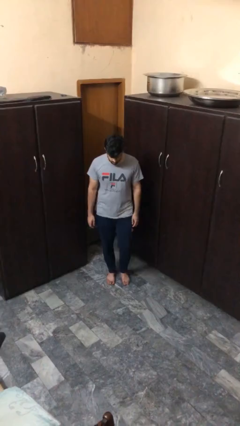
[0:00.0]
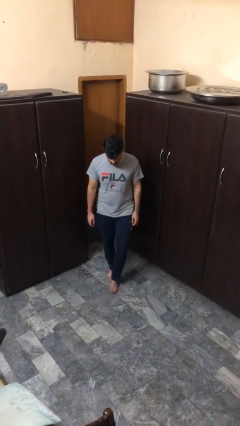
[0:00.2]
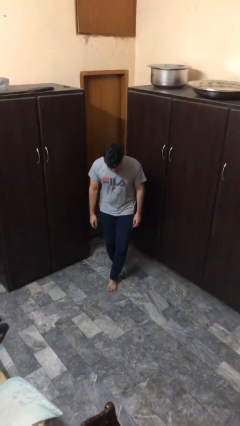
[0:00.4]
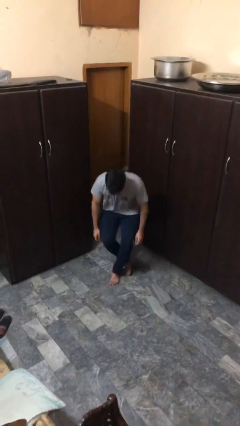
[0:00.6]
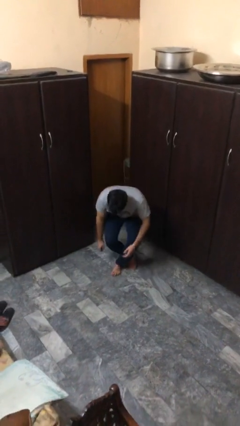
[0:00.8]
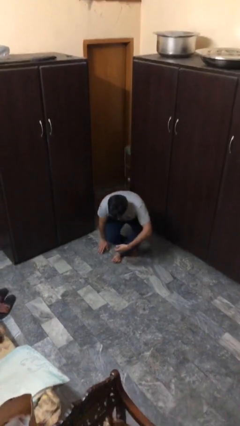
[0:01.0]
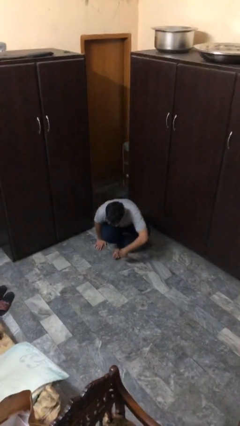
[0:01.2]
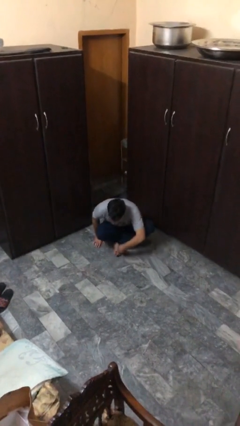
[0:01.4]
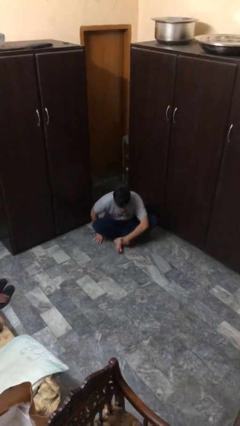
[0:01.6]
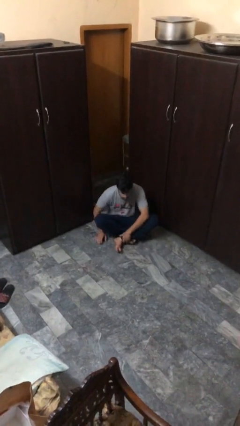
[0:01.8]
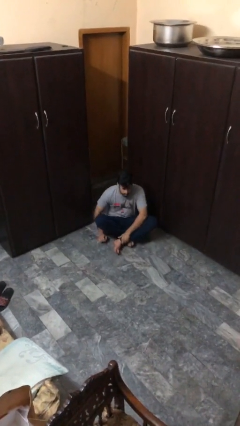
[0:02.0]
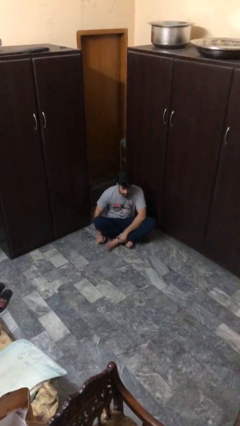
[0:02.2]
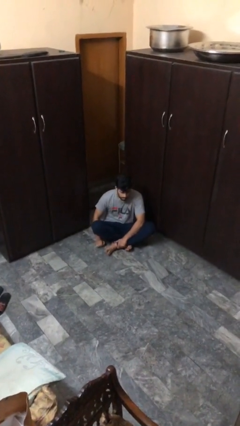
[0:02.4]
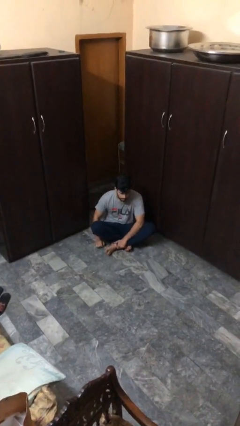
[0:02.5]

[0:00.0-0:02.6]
person sits crisscross

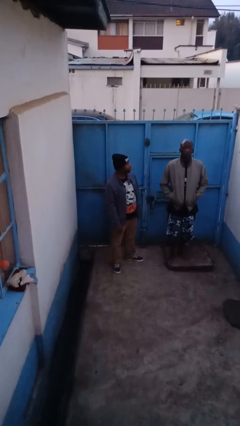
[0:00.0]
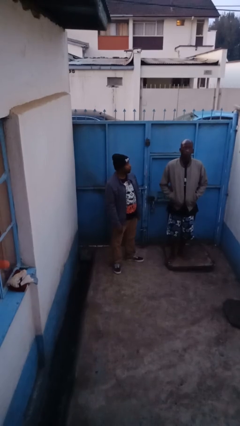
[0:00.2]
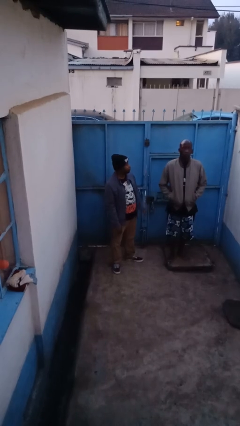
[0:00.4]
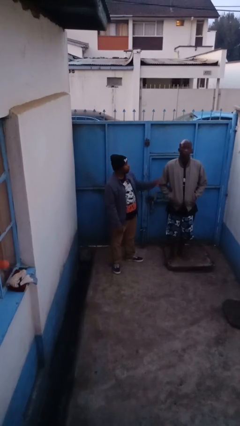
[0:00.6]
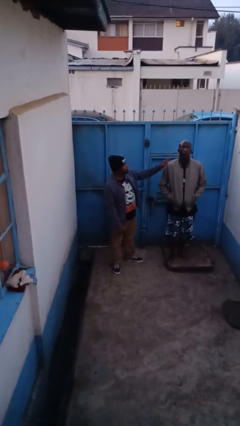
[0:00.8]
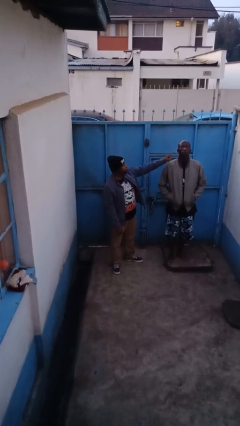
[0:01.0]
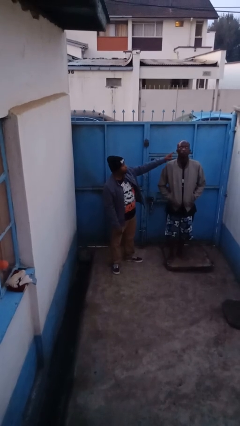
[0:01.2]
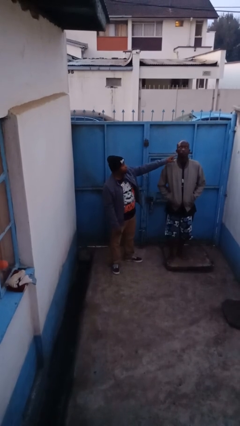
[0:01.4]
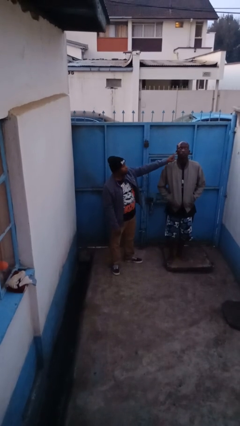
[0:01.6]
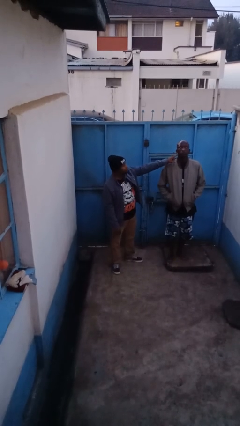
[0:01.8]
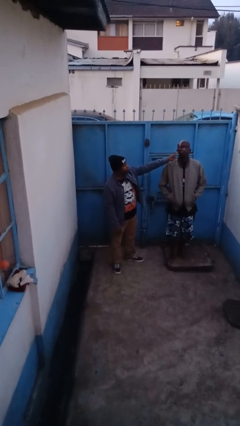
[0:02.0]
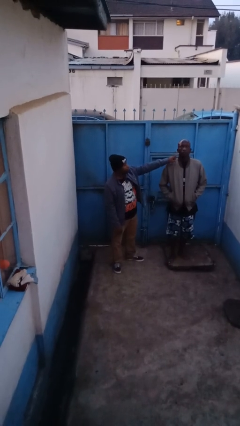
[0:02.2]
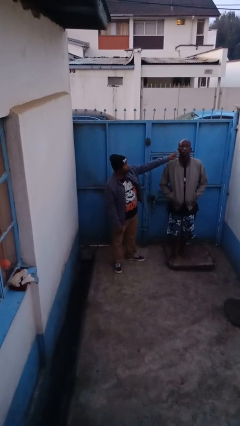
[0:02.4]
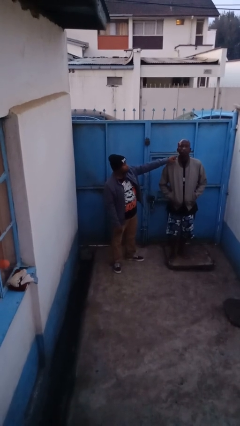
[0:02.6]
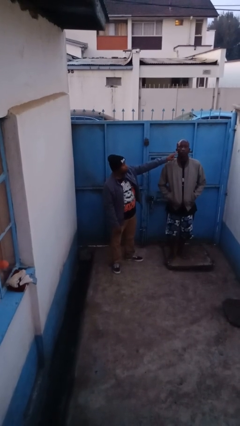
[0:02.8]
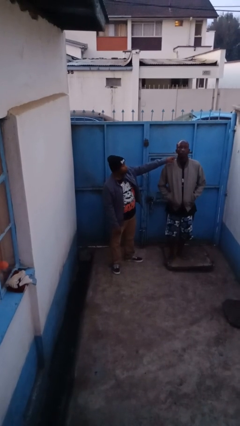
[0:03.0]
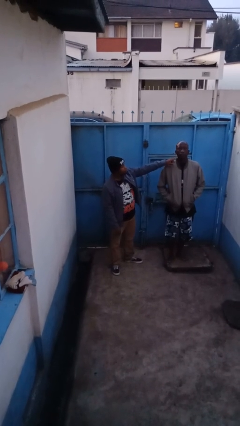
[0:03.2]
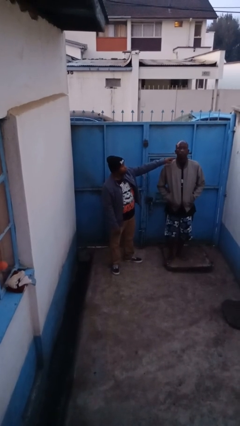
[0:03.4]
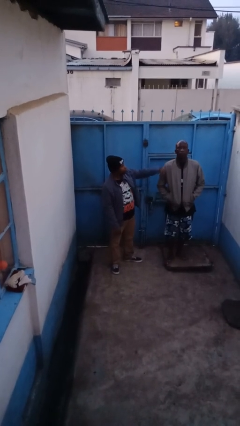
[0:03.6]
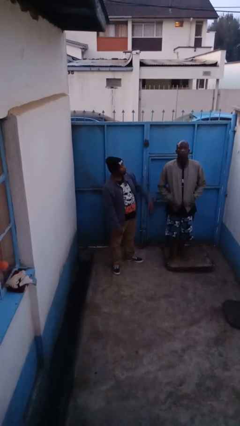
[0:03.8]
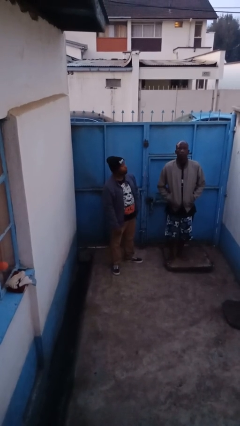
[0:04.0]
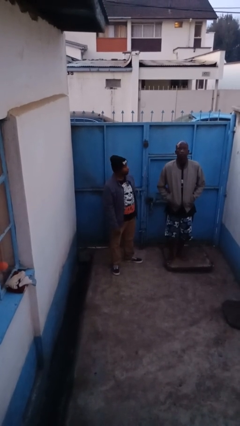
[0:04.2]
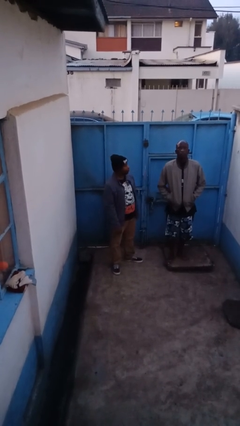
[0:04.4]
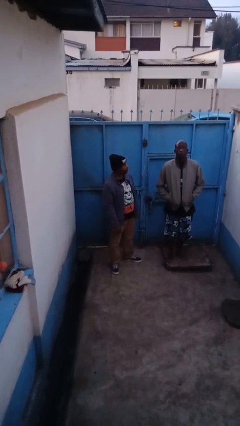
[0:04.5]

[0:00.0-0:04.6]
person touches face of person

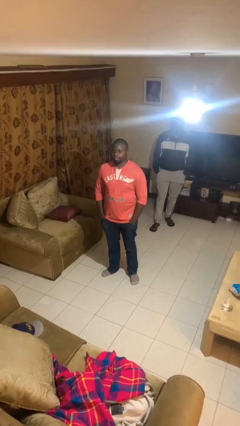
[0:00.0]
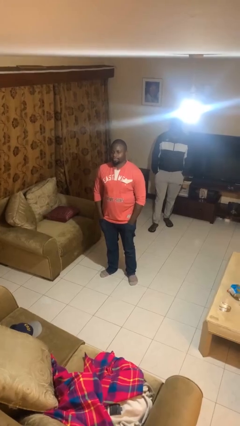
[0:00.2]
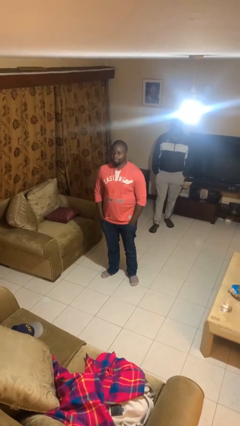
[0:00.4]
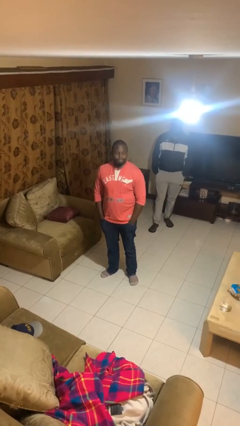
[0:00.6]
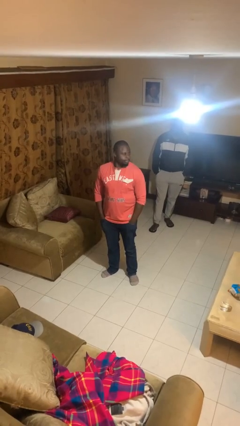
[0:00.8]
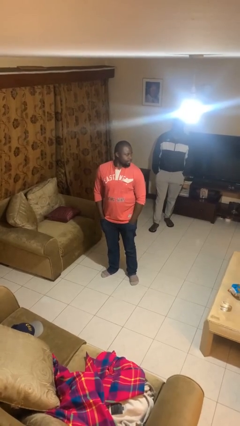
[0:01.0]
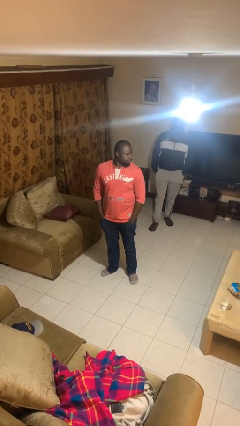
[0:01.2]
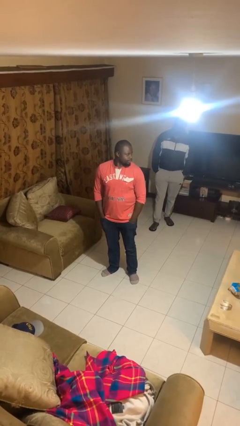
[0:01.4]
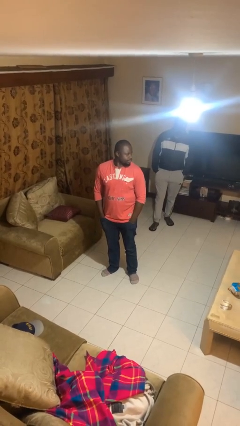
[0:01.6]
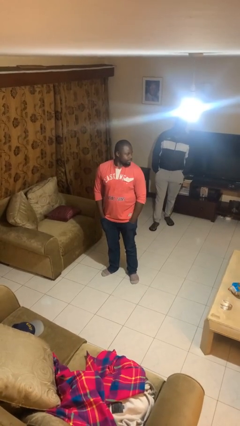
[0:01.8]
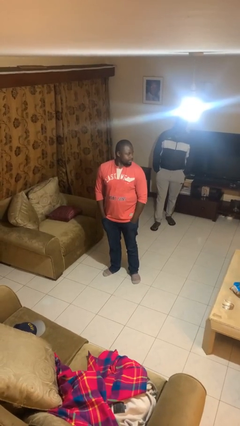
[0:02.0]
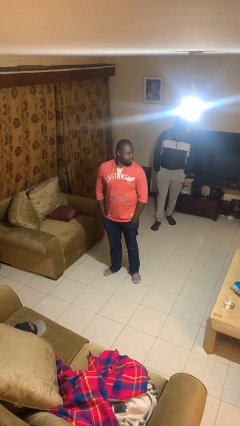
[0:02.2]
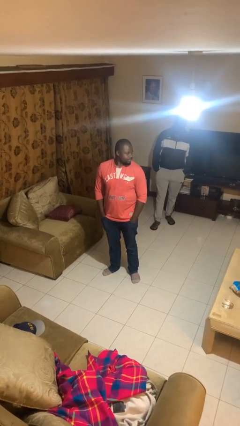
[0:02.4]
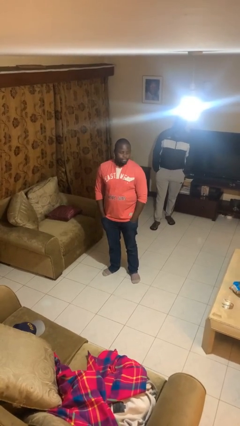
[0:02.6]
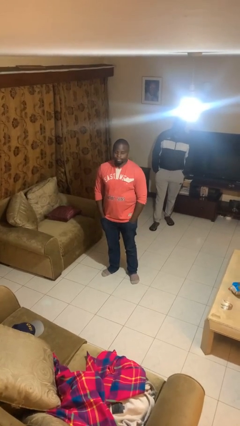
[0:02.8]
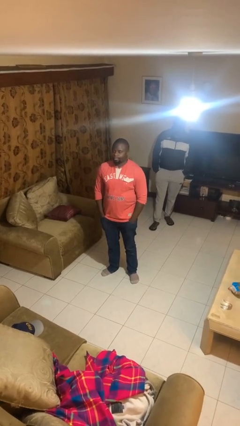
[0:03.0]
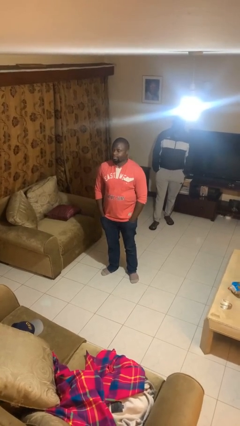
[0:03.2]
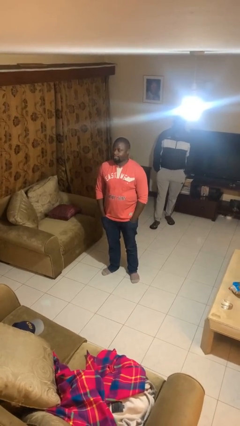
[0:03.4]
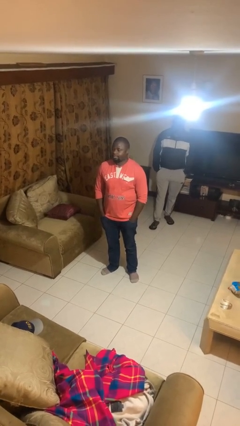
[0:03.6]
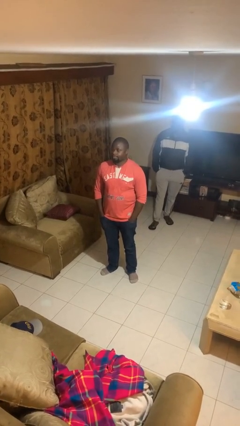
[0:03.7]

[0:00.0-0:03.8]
person looks over shoulder

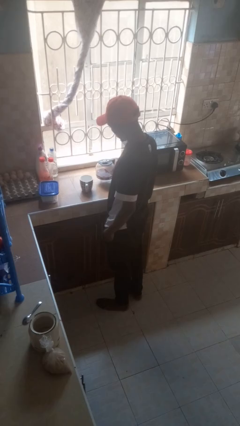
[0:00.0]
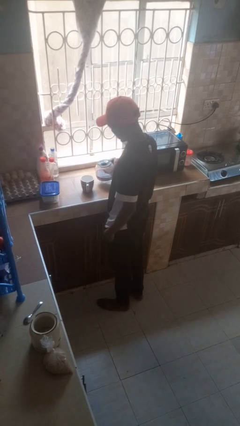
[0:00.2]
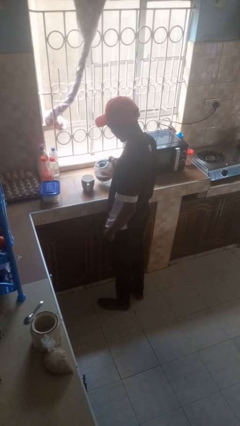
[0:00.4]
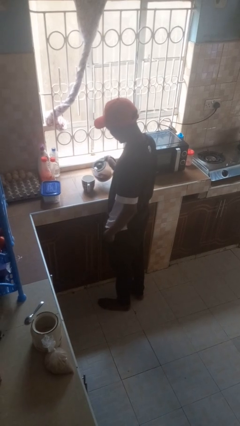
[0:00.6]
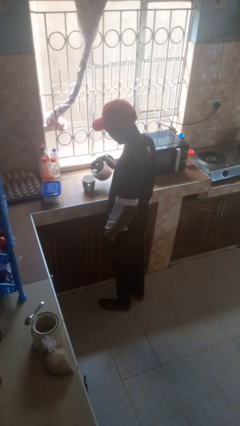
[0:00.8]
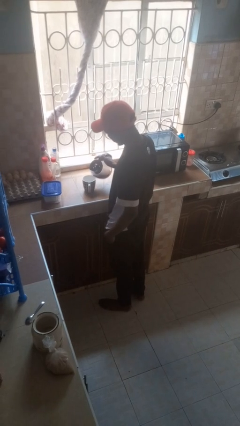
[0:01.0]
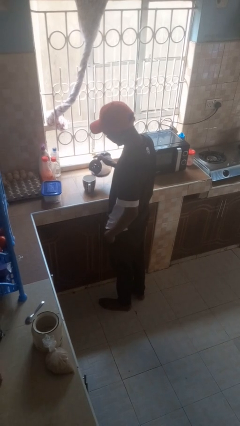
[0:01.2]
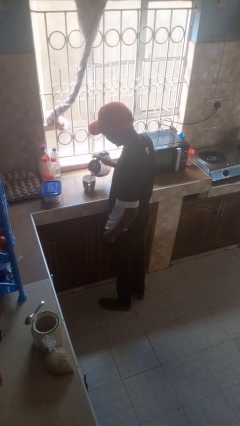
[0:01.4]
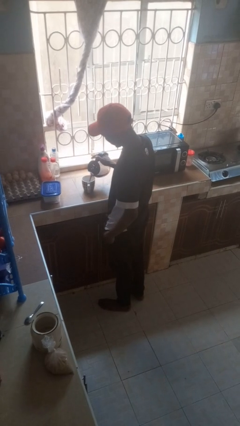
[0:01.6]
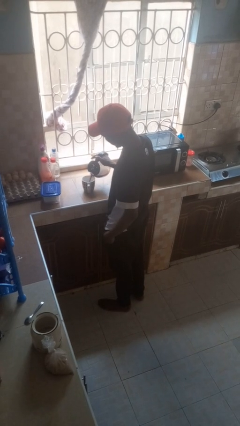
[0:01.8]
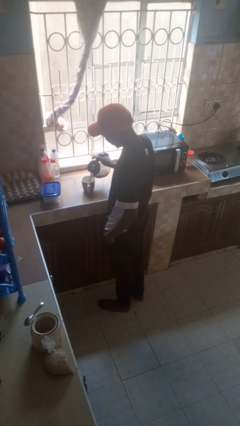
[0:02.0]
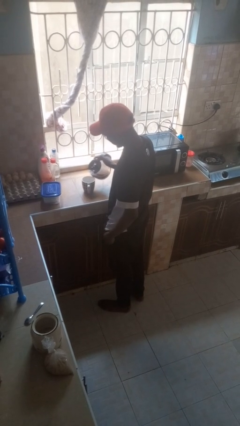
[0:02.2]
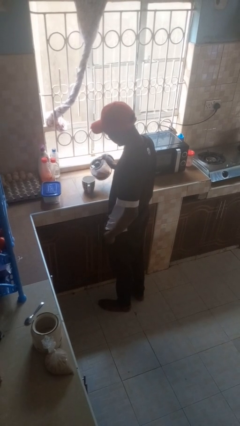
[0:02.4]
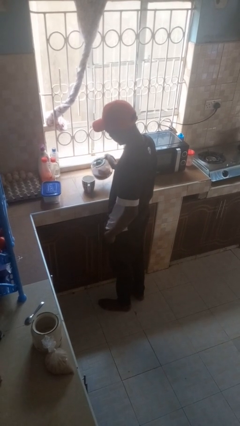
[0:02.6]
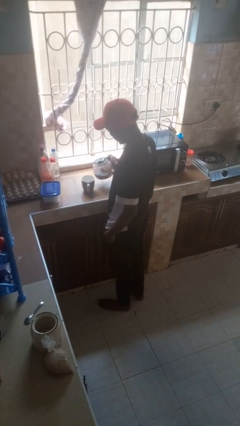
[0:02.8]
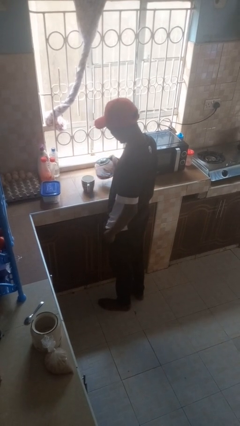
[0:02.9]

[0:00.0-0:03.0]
person pours coffee into mug

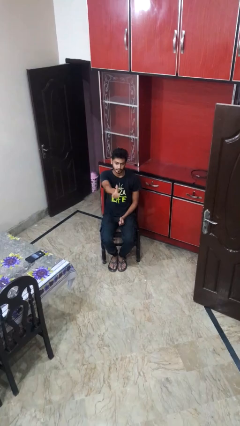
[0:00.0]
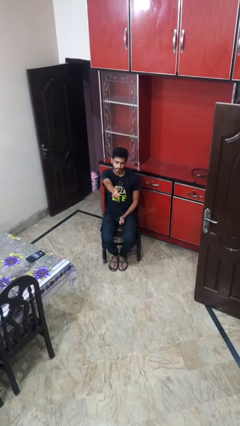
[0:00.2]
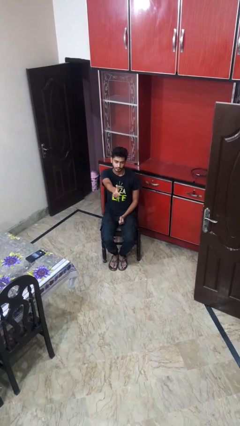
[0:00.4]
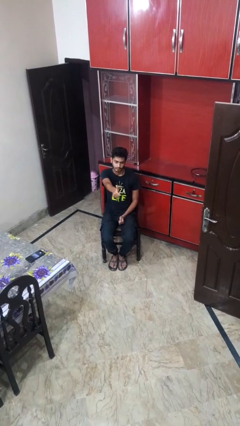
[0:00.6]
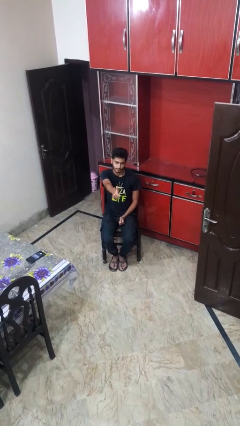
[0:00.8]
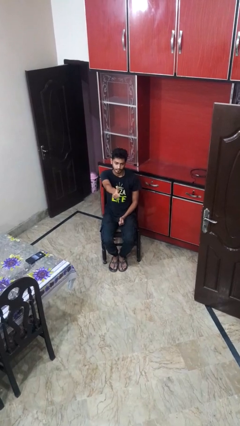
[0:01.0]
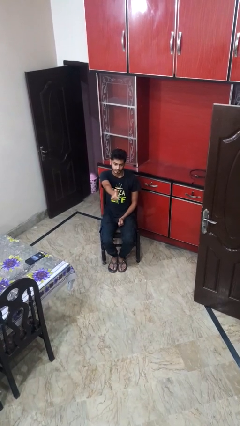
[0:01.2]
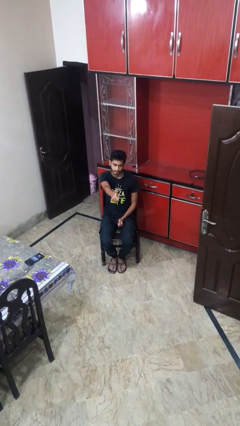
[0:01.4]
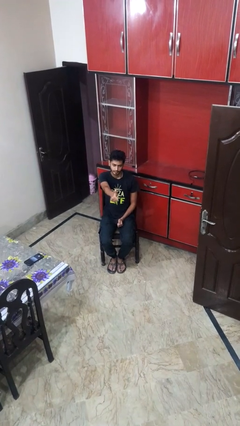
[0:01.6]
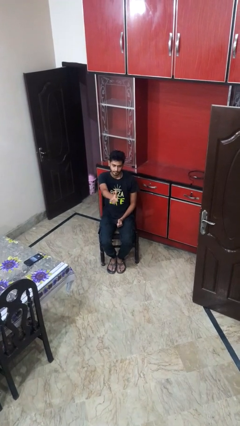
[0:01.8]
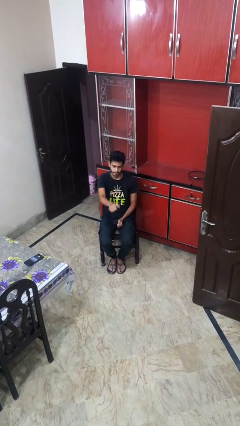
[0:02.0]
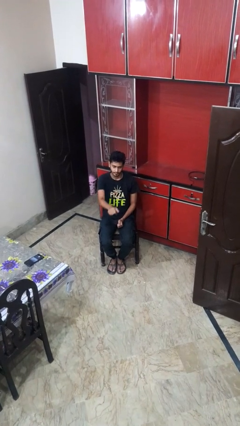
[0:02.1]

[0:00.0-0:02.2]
person gestures thumbs up

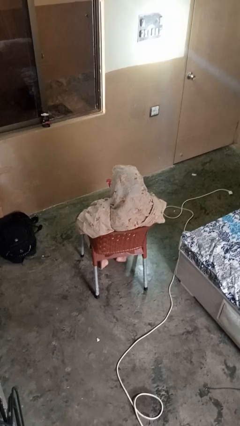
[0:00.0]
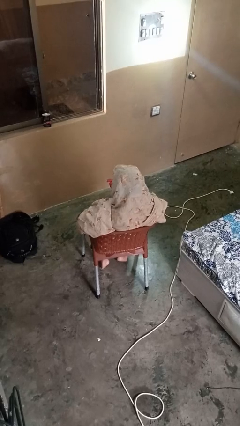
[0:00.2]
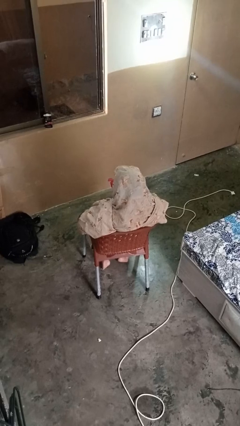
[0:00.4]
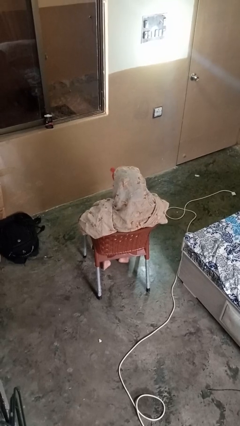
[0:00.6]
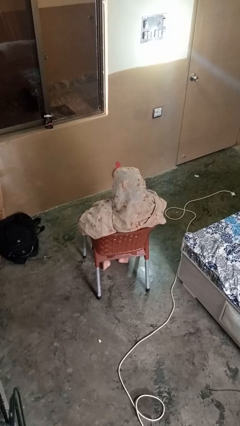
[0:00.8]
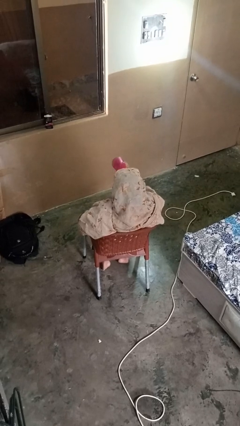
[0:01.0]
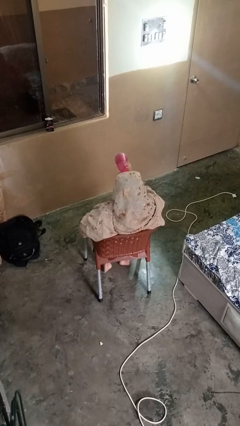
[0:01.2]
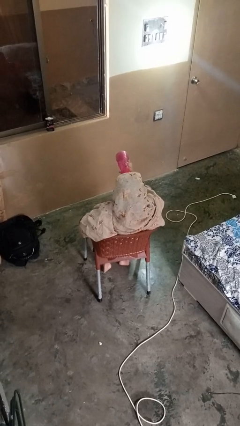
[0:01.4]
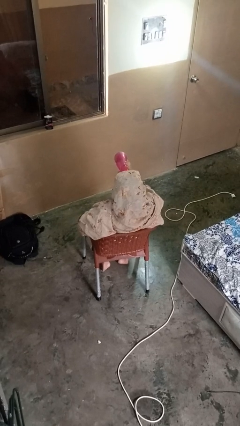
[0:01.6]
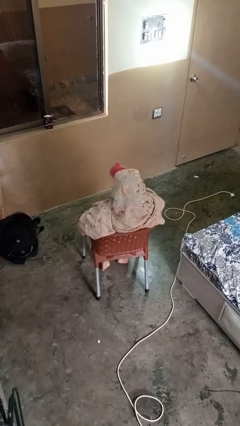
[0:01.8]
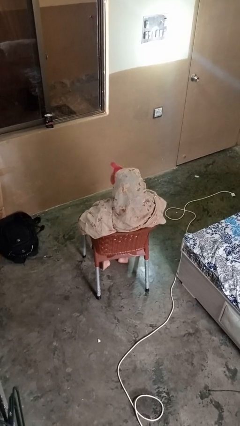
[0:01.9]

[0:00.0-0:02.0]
person drinks from bottle
